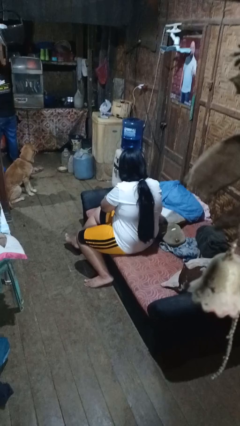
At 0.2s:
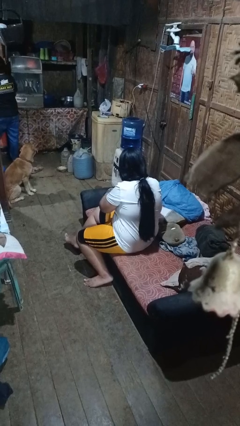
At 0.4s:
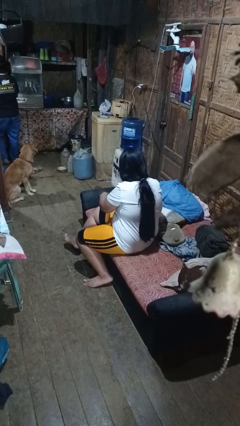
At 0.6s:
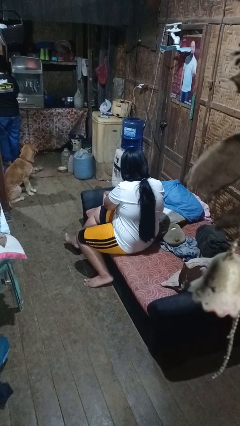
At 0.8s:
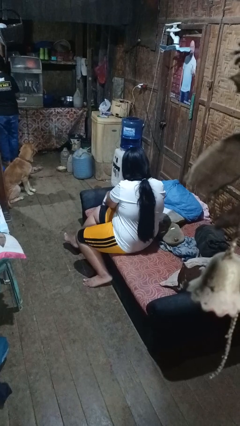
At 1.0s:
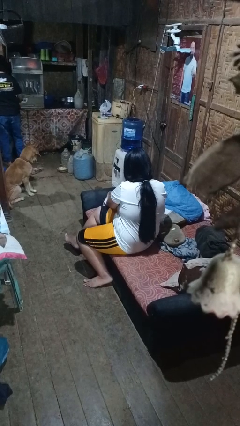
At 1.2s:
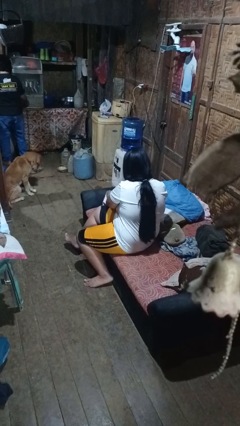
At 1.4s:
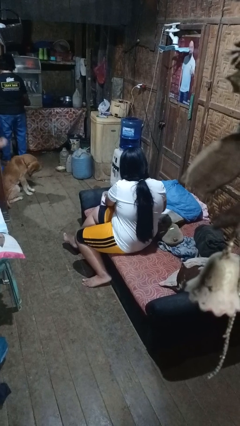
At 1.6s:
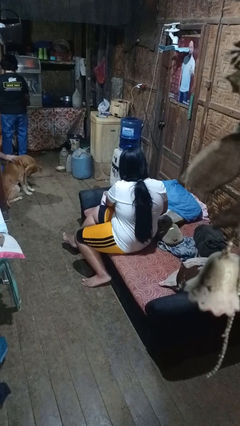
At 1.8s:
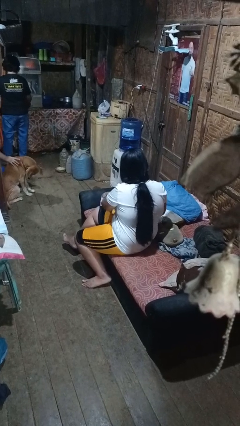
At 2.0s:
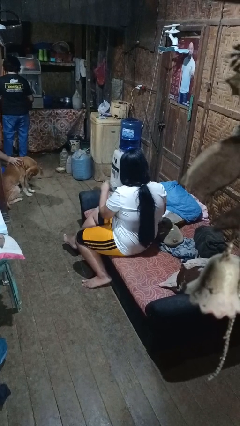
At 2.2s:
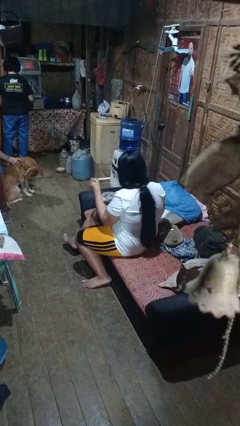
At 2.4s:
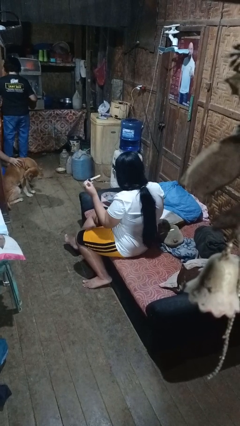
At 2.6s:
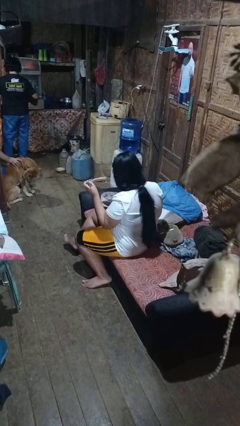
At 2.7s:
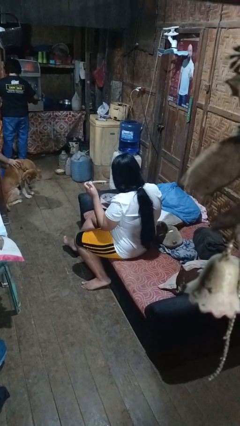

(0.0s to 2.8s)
person searches in bag

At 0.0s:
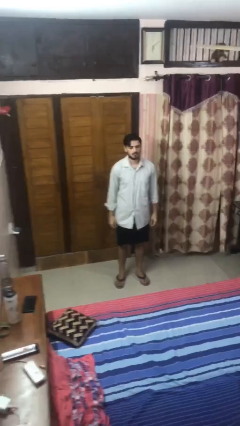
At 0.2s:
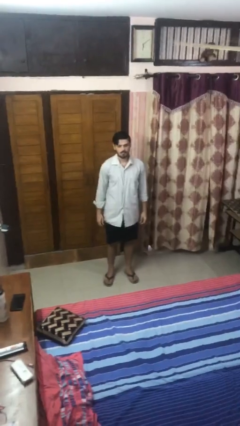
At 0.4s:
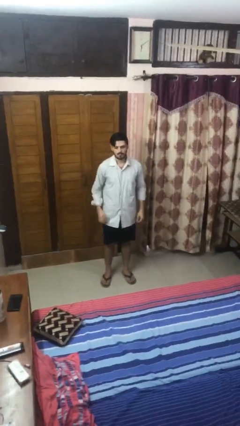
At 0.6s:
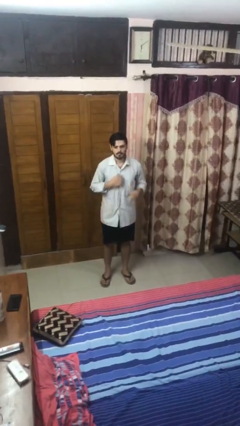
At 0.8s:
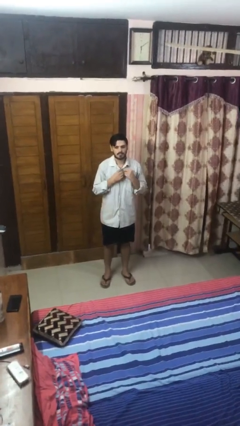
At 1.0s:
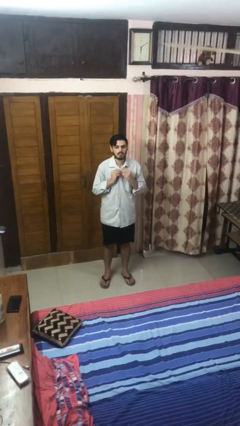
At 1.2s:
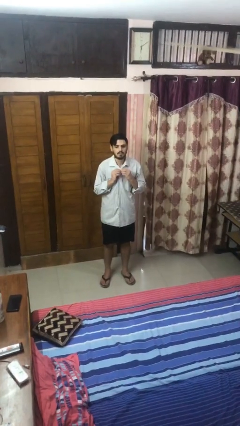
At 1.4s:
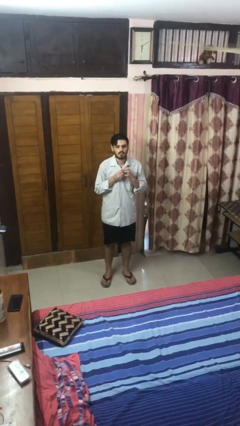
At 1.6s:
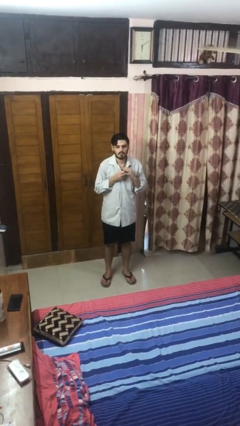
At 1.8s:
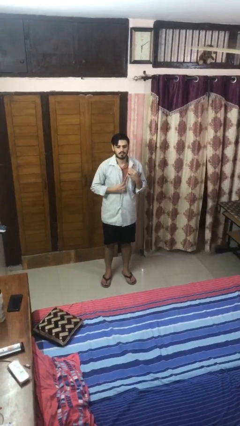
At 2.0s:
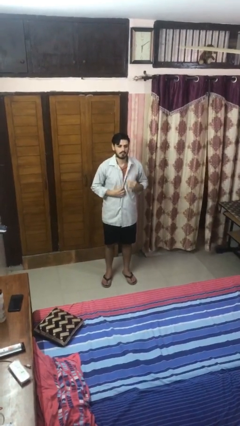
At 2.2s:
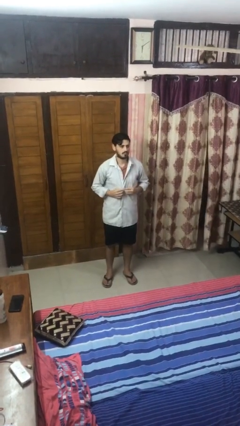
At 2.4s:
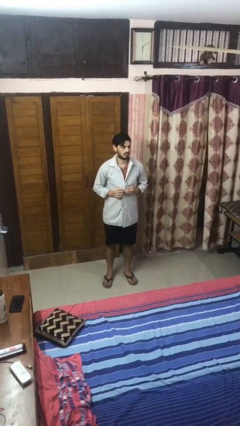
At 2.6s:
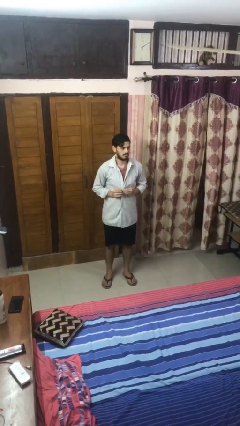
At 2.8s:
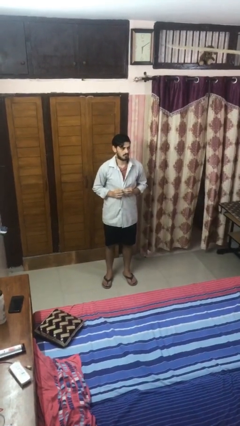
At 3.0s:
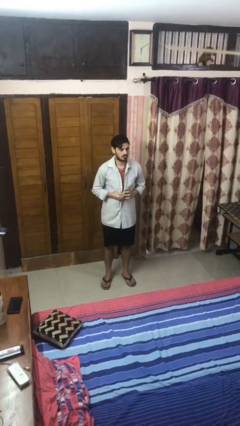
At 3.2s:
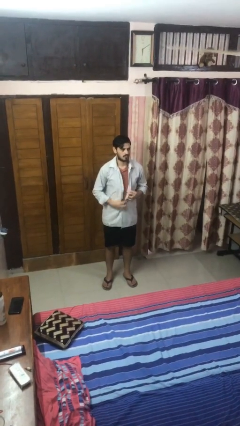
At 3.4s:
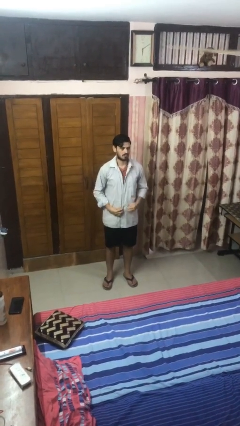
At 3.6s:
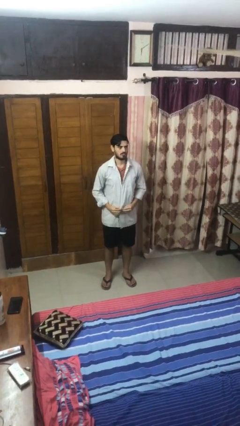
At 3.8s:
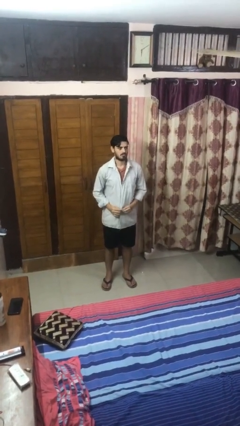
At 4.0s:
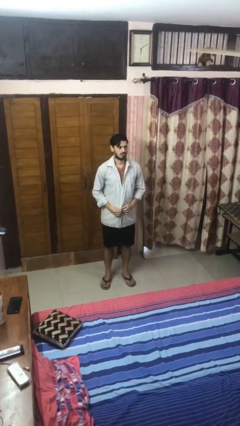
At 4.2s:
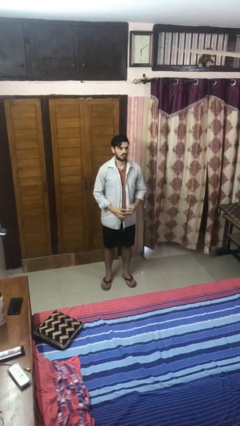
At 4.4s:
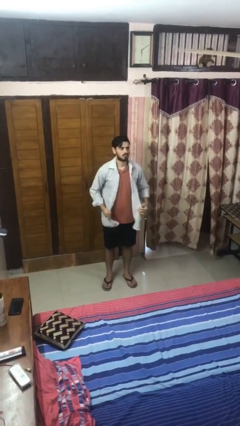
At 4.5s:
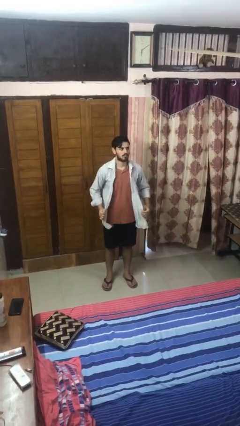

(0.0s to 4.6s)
person unbuttons shirt

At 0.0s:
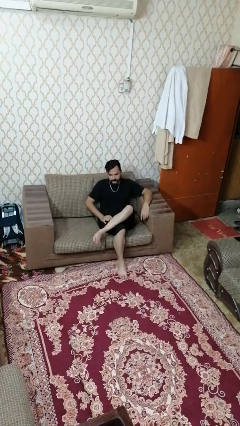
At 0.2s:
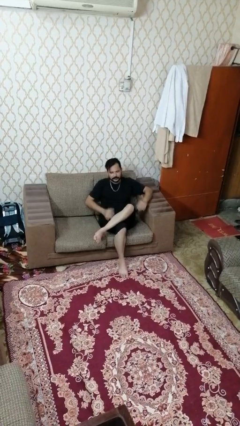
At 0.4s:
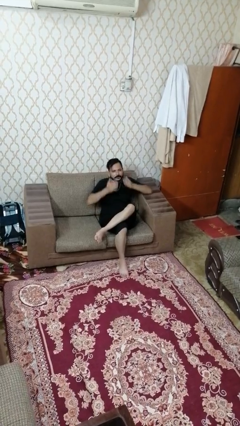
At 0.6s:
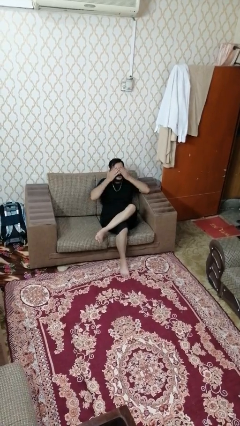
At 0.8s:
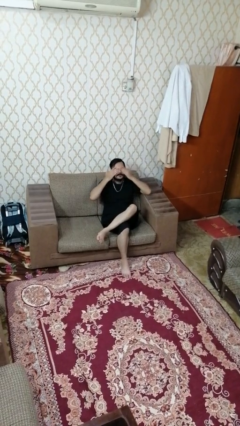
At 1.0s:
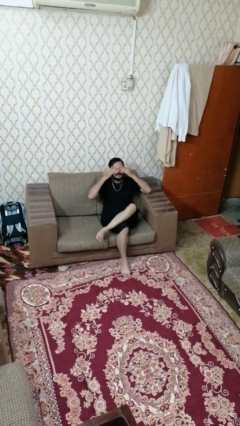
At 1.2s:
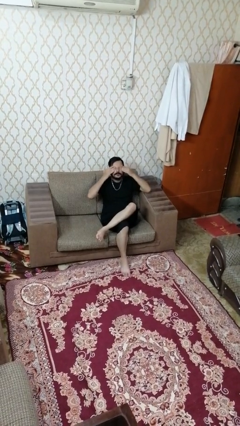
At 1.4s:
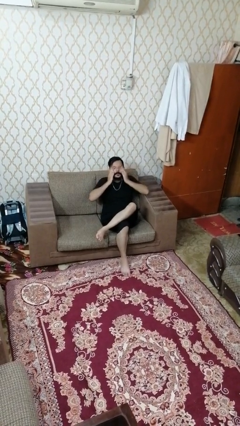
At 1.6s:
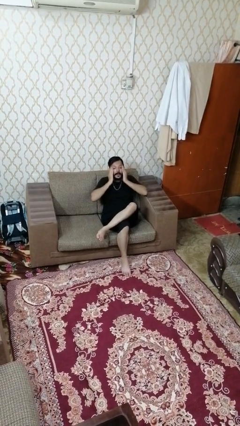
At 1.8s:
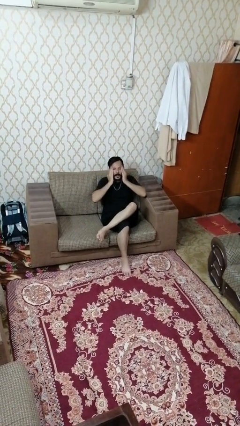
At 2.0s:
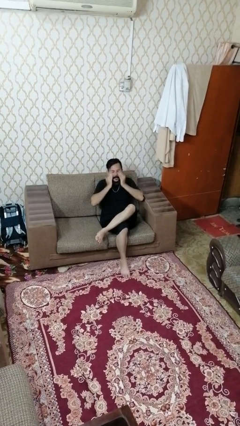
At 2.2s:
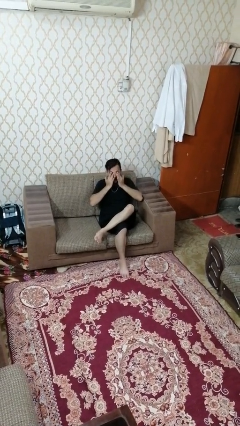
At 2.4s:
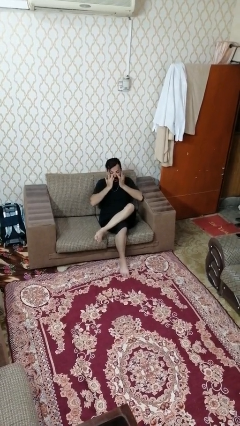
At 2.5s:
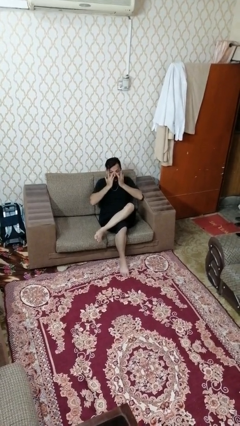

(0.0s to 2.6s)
person rubs eyes

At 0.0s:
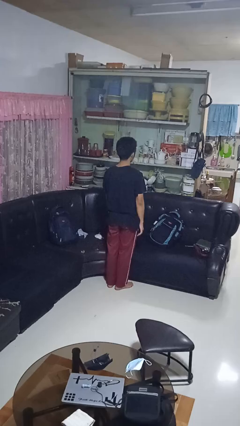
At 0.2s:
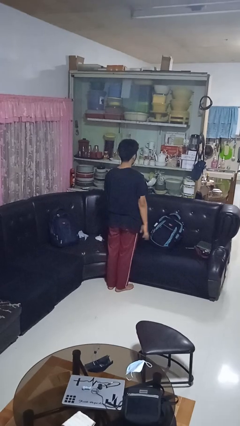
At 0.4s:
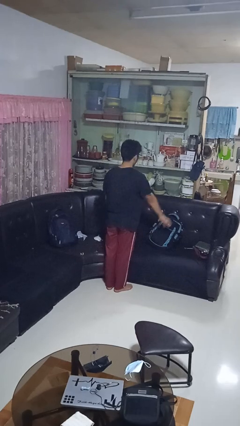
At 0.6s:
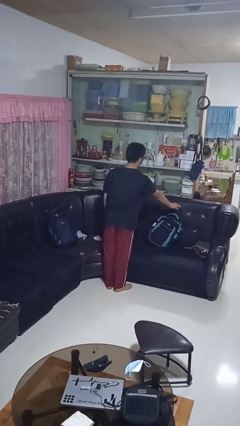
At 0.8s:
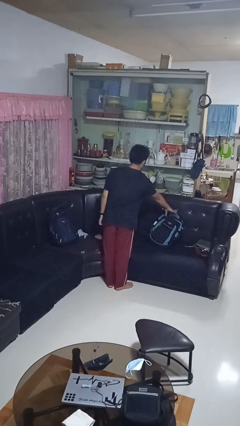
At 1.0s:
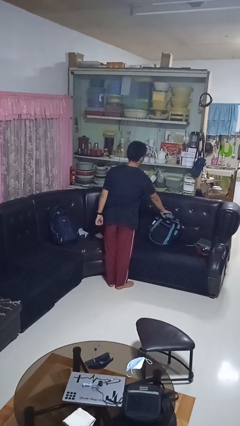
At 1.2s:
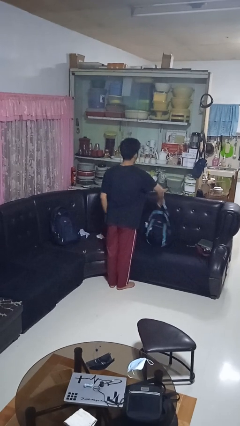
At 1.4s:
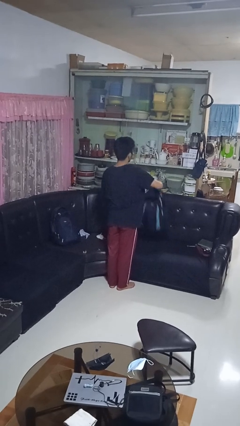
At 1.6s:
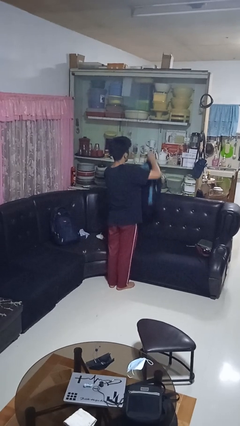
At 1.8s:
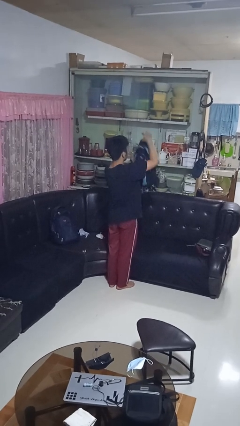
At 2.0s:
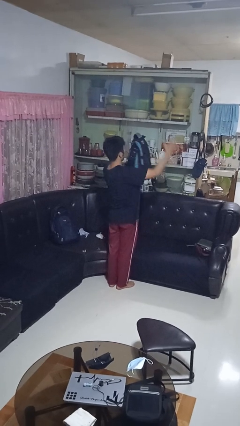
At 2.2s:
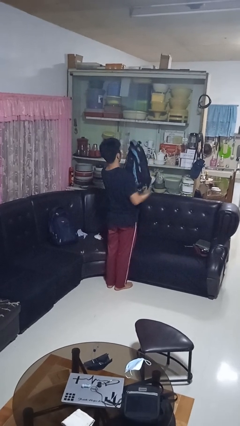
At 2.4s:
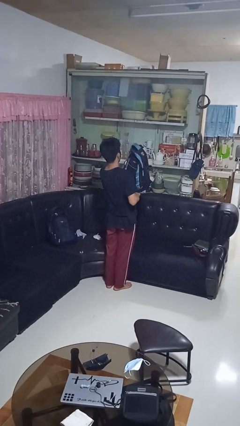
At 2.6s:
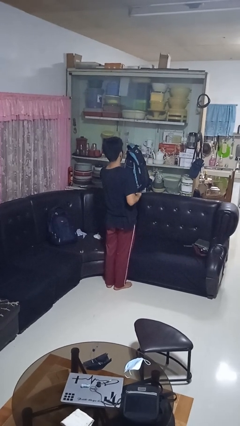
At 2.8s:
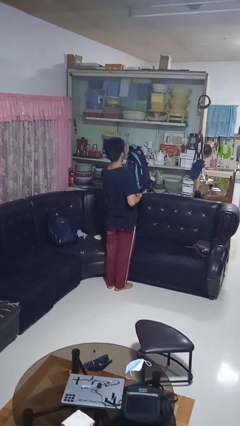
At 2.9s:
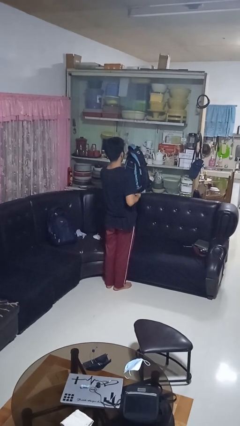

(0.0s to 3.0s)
person picks up object from couch

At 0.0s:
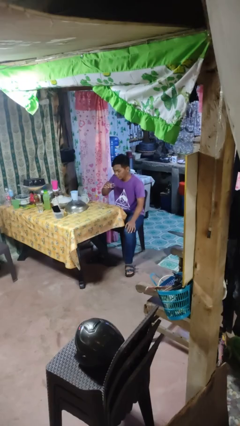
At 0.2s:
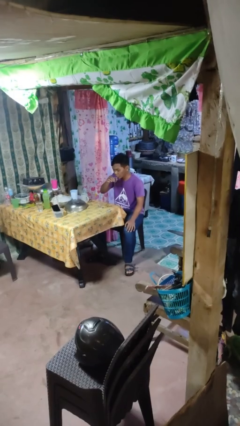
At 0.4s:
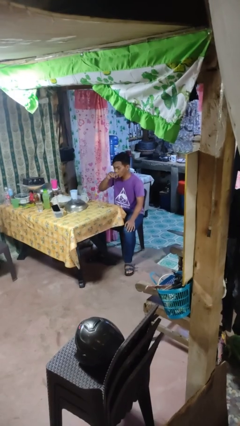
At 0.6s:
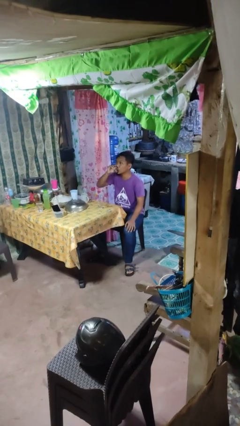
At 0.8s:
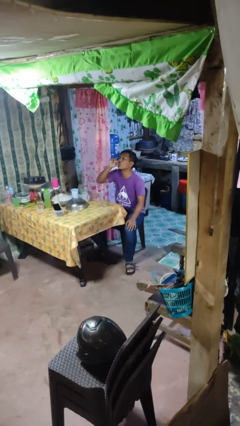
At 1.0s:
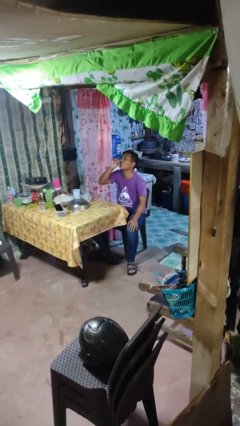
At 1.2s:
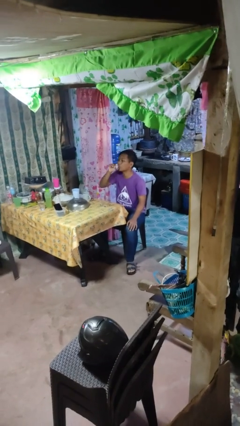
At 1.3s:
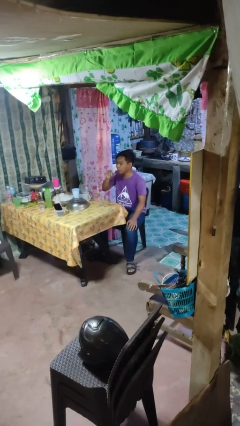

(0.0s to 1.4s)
person drinks from shotglass

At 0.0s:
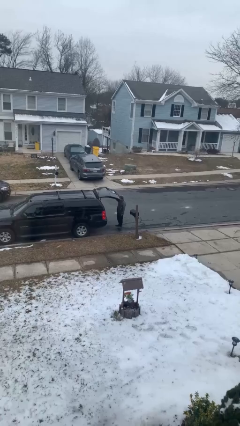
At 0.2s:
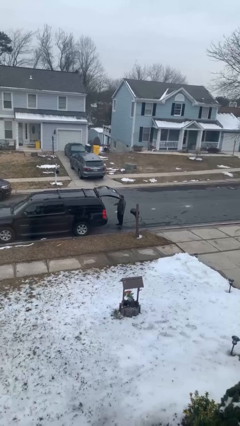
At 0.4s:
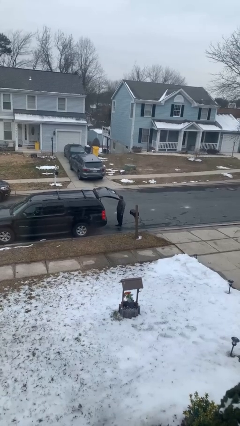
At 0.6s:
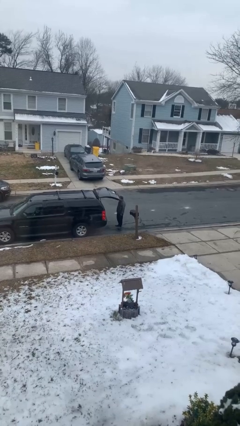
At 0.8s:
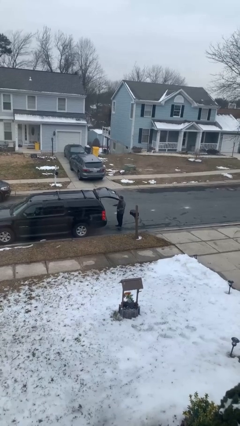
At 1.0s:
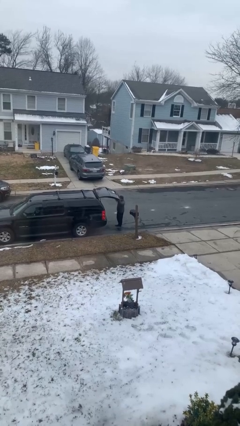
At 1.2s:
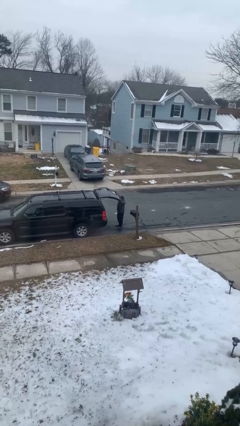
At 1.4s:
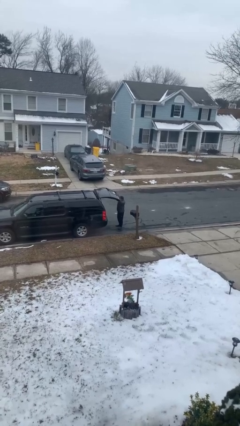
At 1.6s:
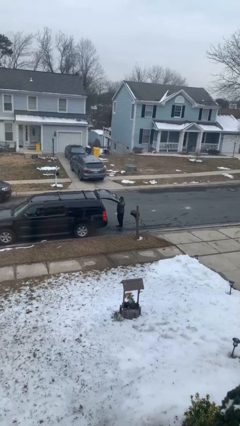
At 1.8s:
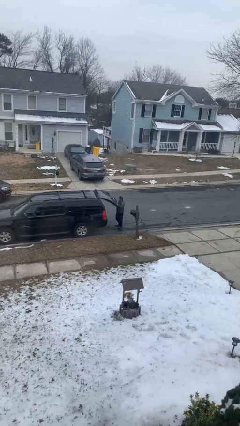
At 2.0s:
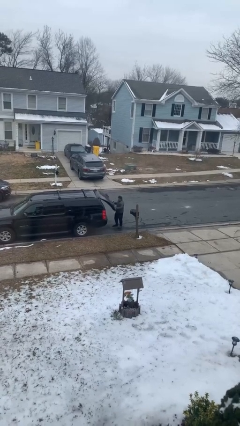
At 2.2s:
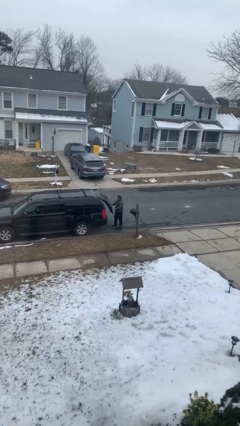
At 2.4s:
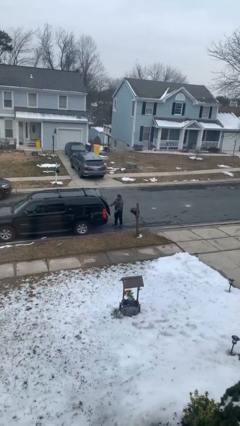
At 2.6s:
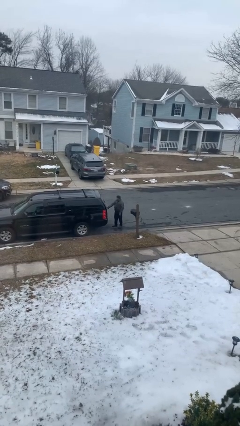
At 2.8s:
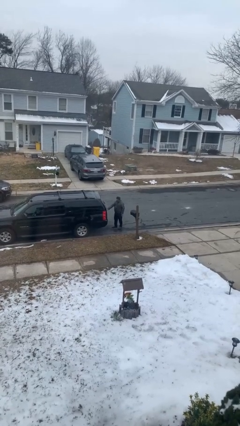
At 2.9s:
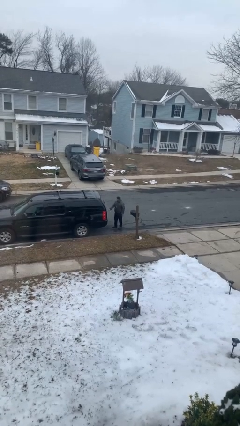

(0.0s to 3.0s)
person closes car trunk
